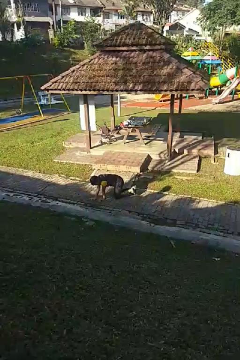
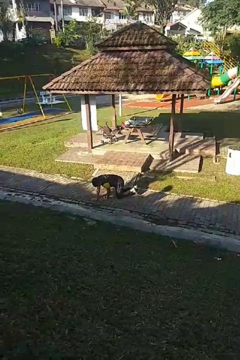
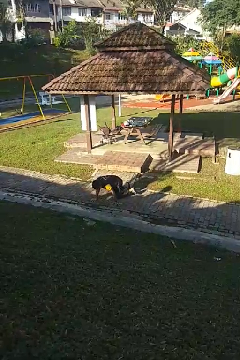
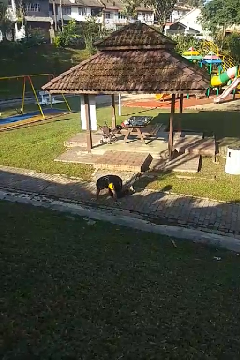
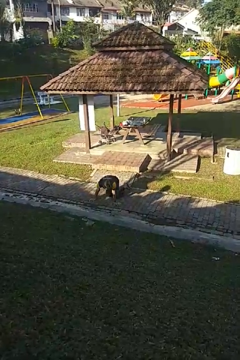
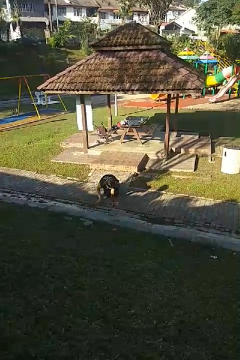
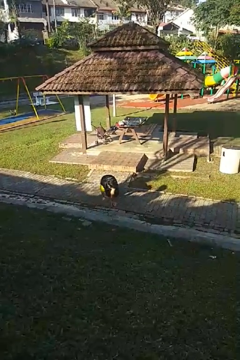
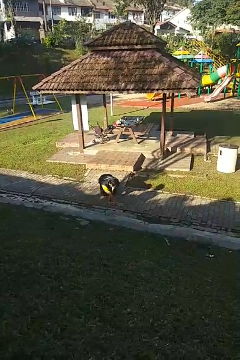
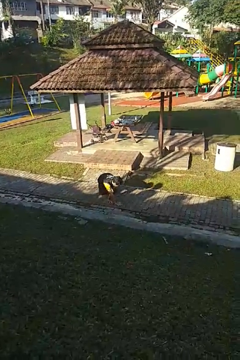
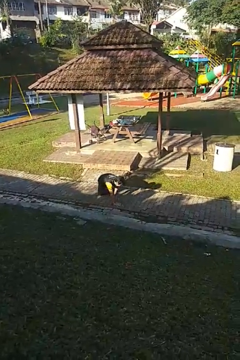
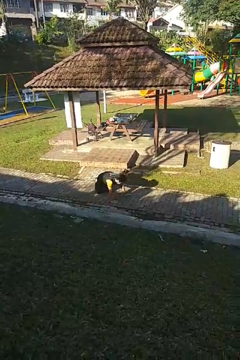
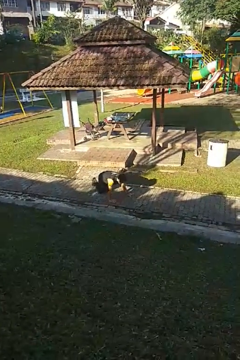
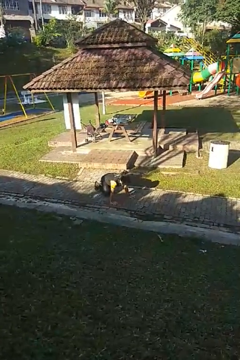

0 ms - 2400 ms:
person crawls

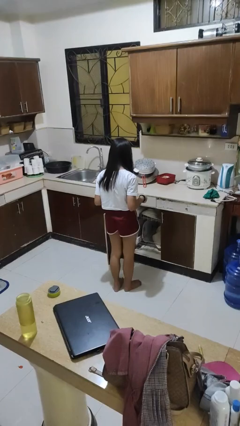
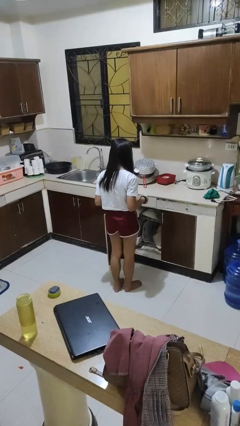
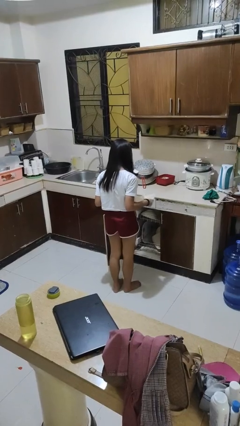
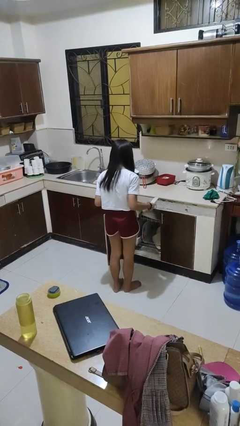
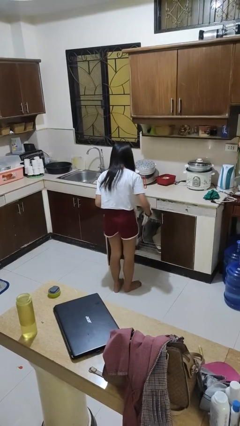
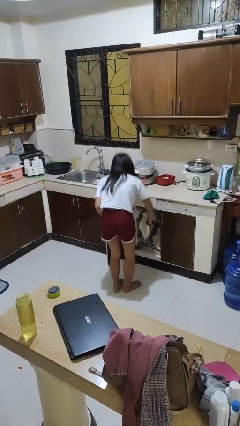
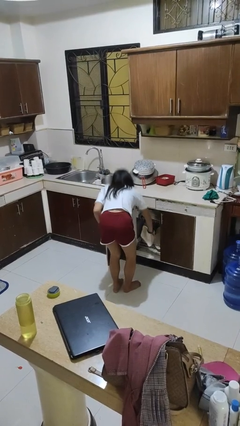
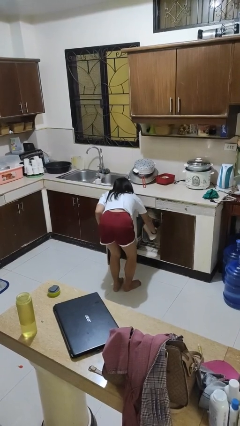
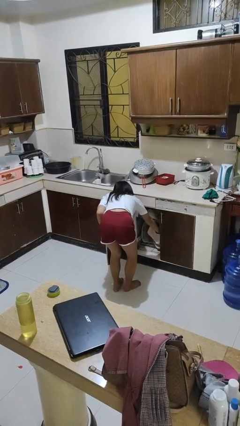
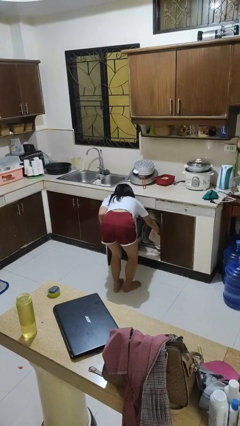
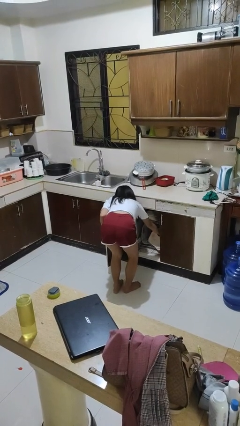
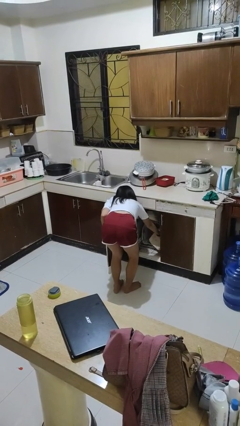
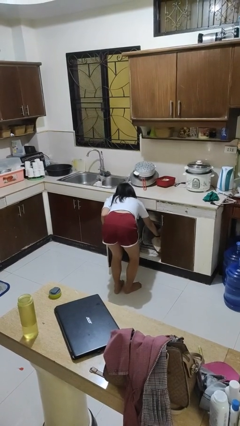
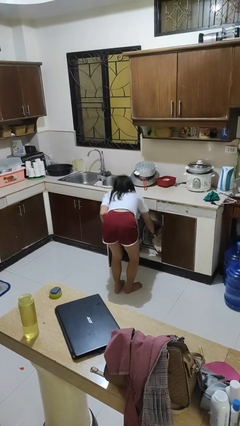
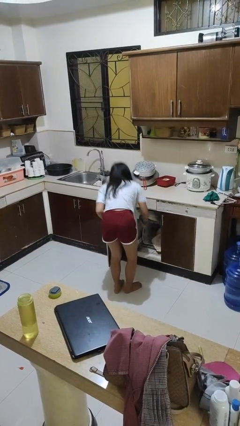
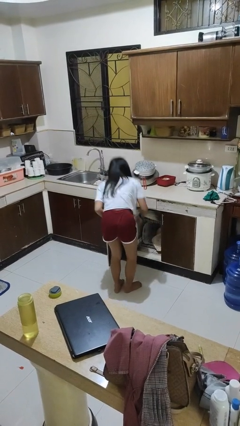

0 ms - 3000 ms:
person loads dishwasher

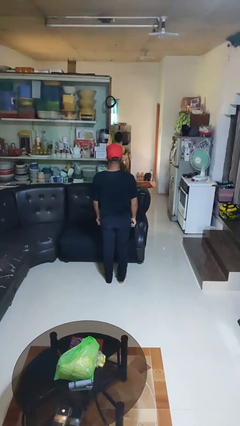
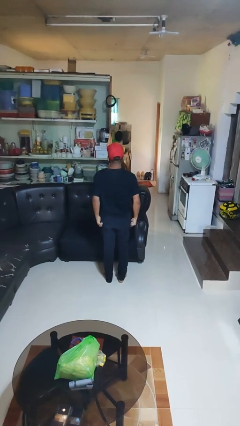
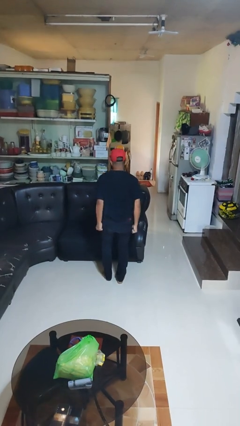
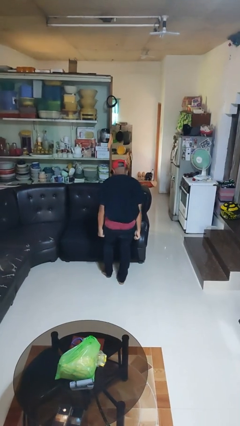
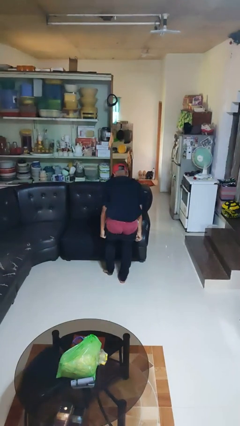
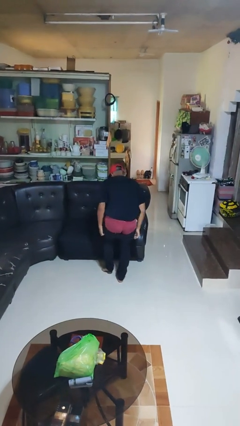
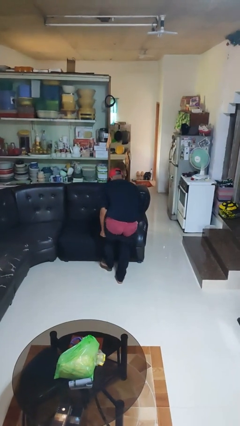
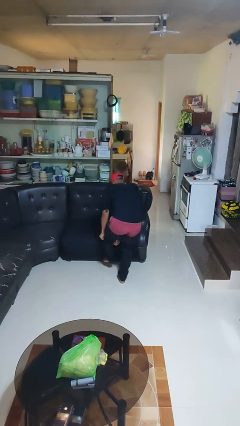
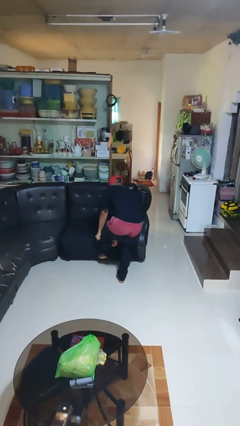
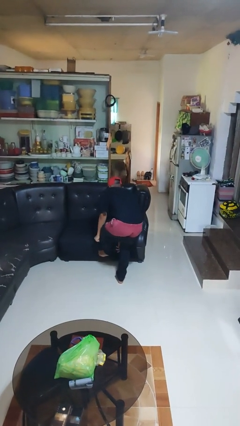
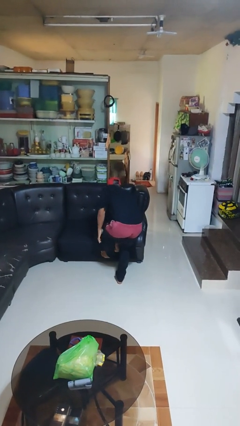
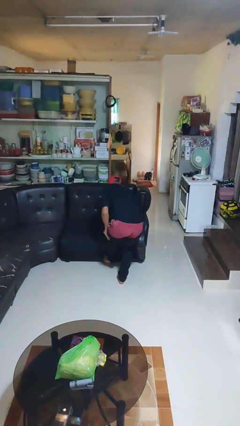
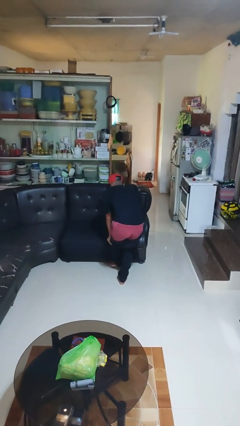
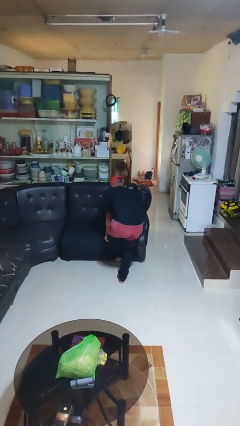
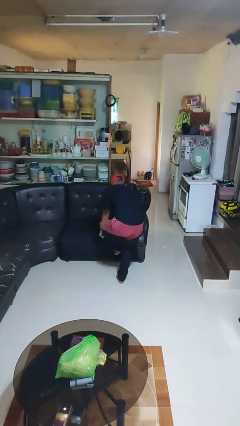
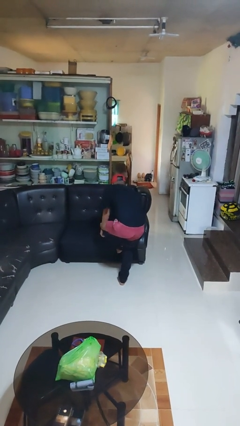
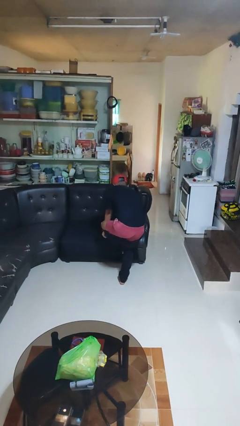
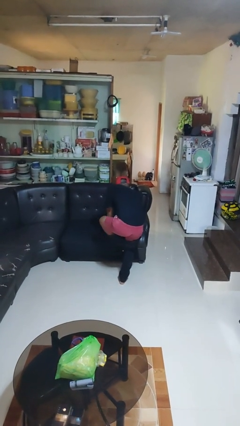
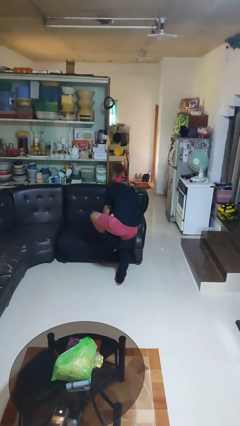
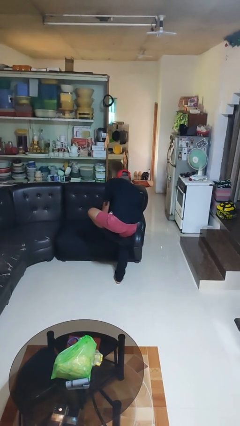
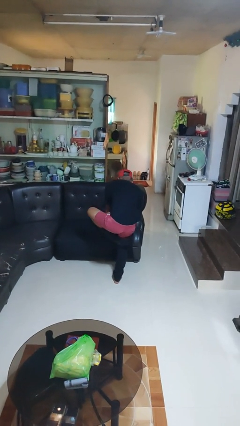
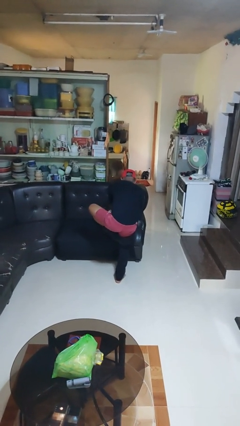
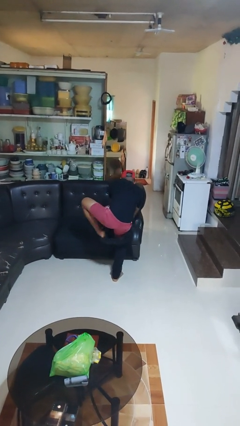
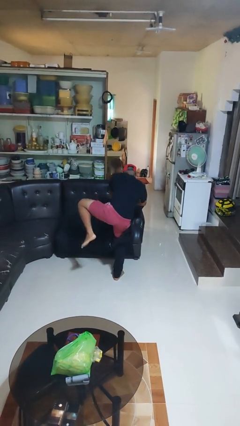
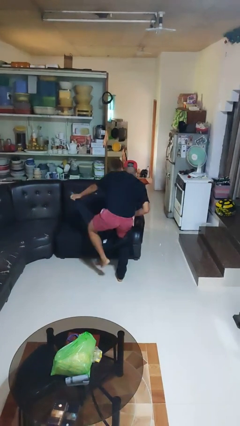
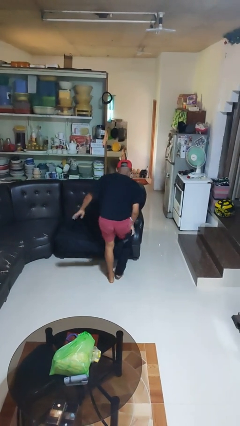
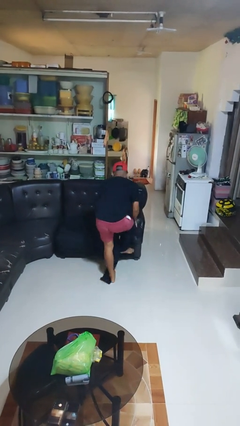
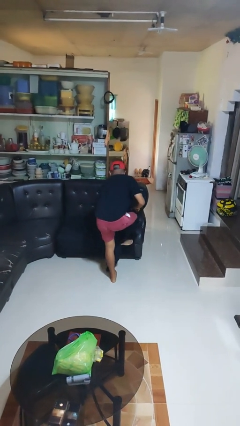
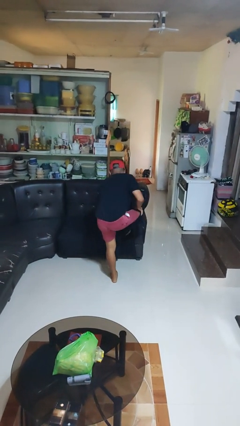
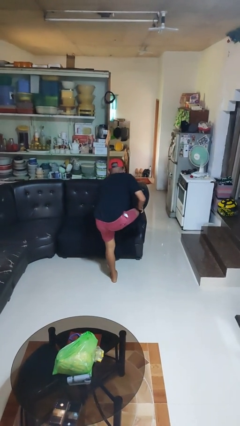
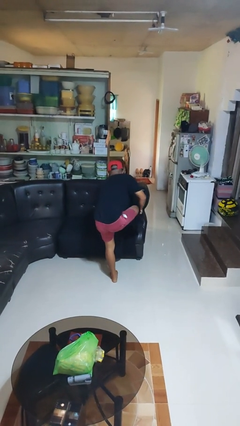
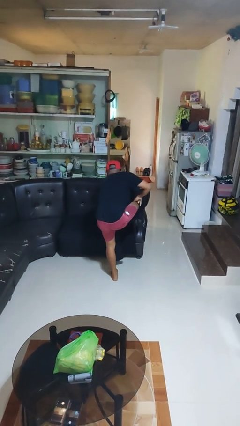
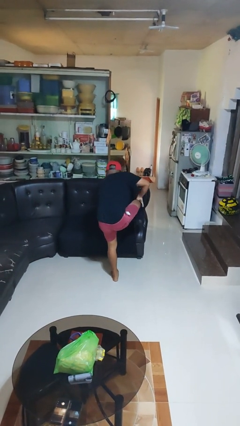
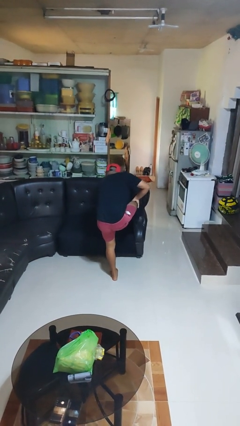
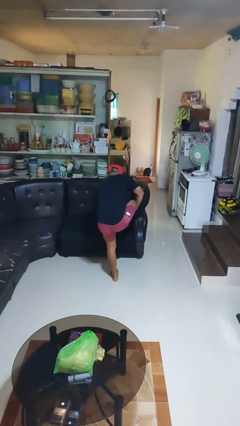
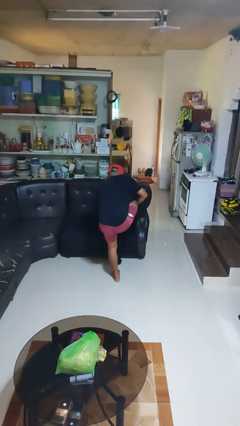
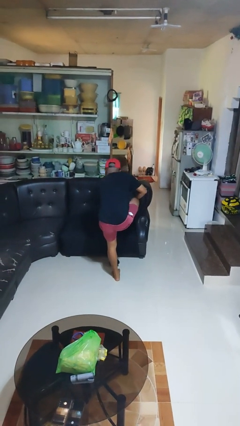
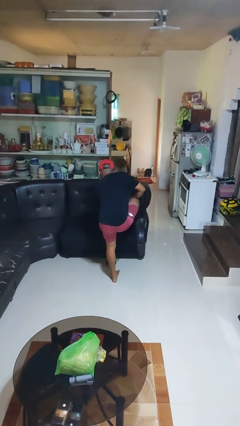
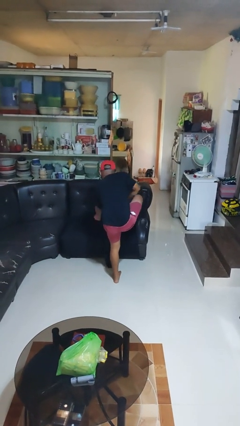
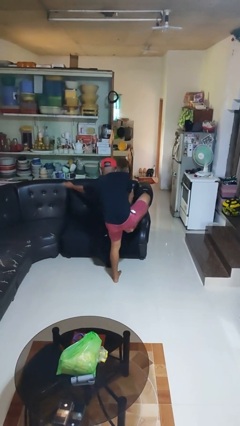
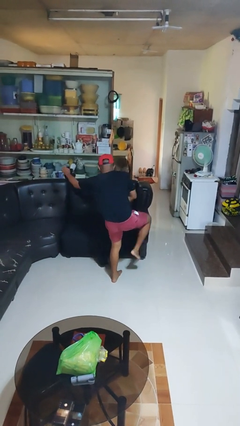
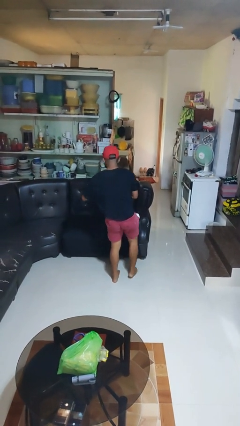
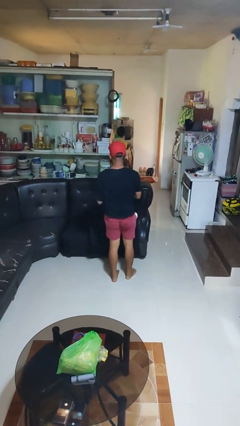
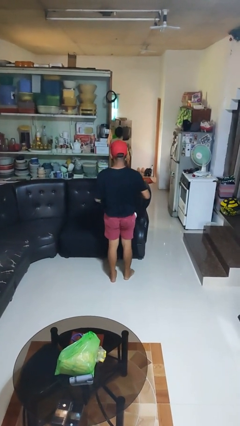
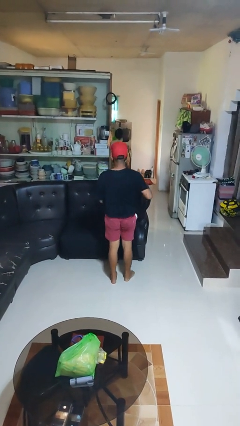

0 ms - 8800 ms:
person takes off pants

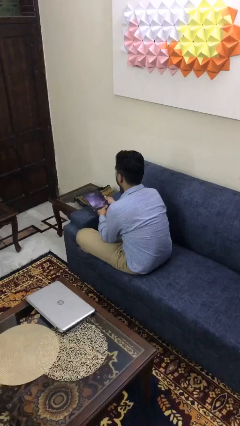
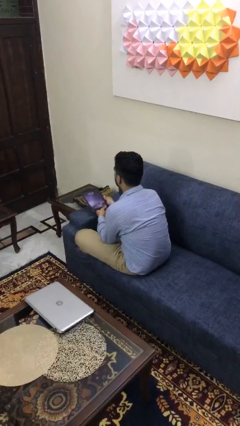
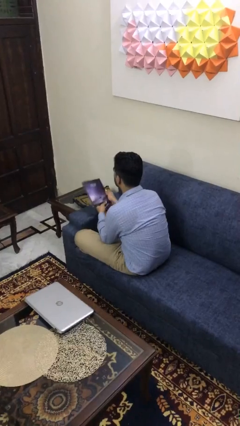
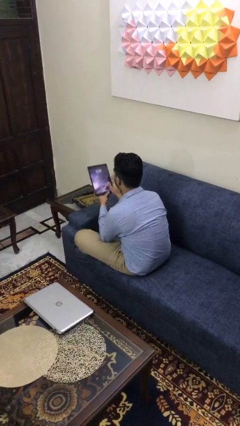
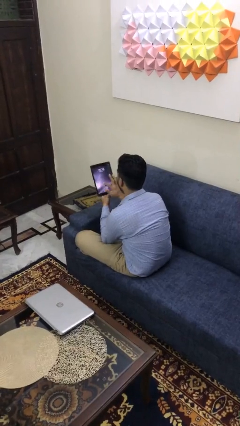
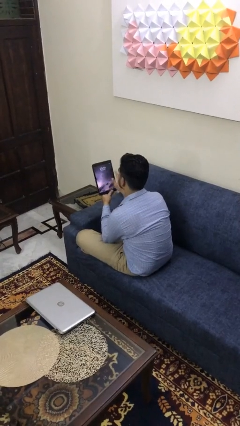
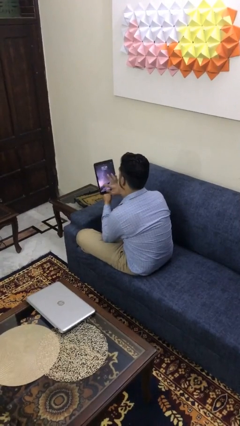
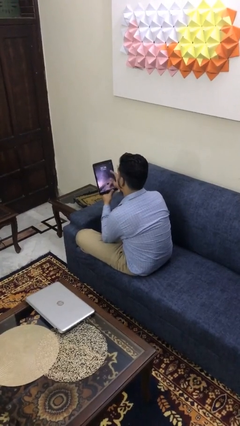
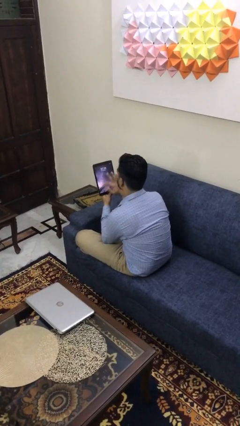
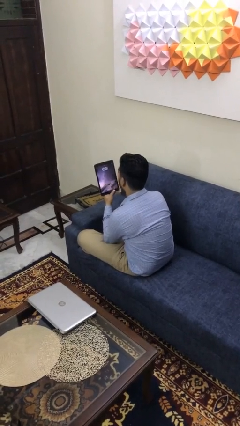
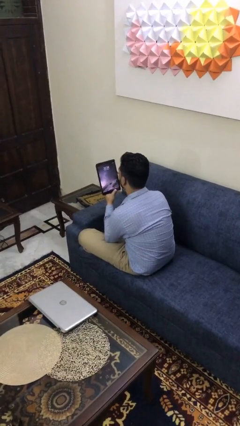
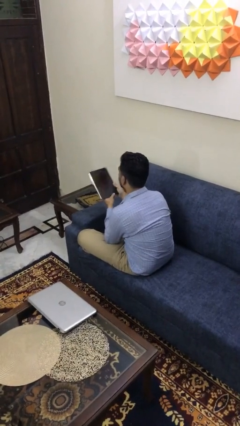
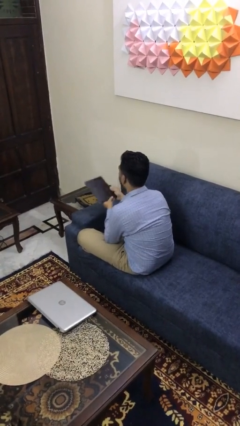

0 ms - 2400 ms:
person interacts with tablet

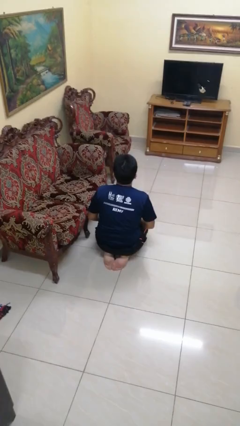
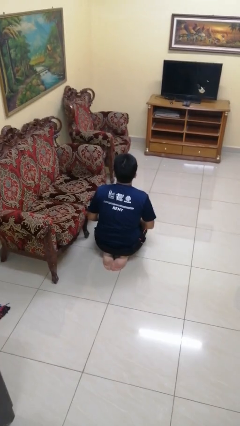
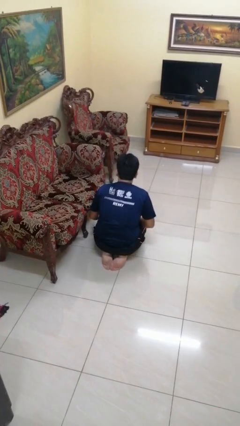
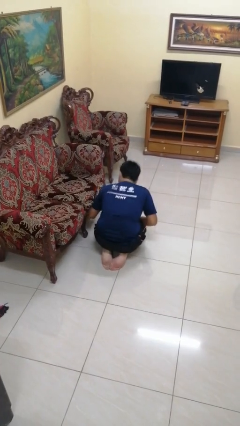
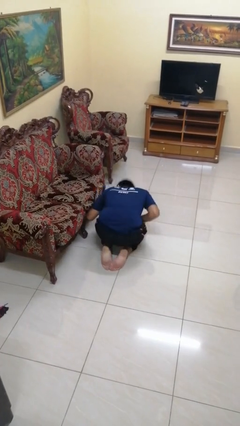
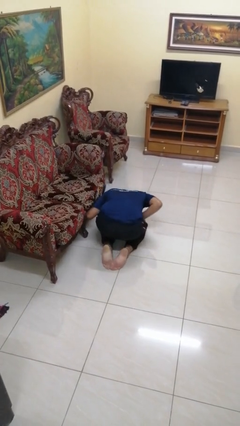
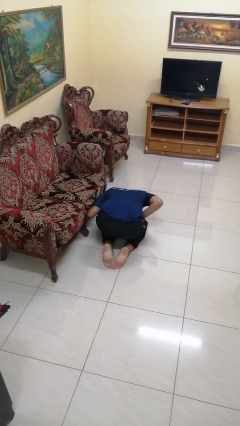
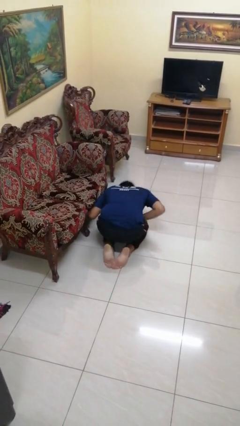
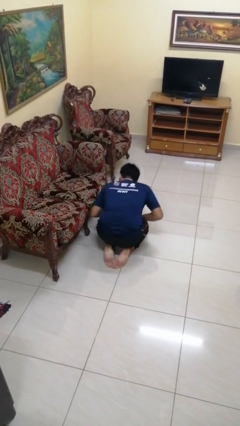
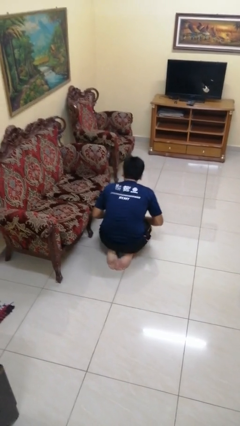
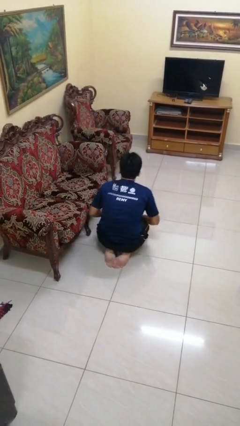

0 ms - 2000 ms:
person searches under couch
